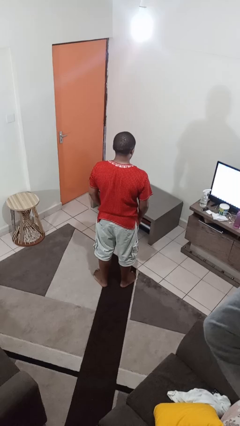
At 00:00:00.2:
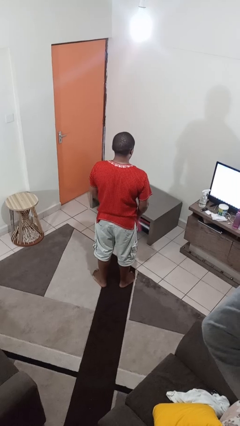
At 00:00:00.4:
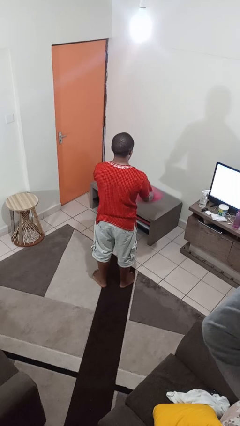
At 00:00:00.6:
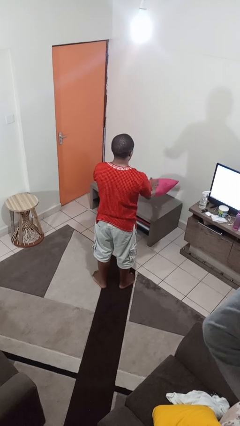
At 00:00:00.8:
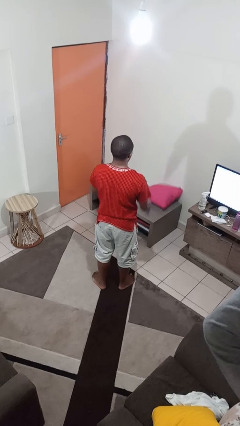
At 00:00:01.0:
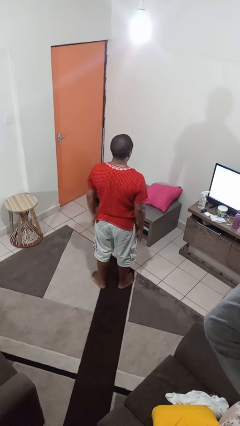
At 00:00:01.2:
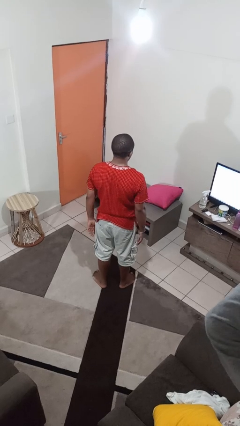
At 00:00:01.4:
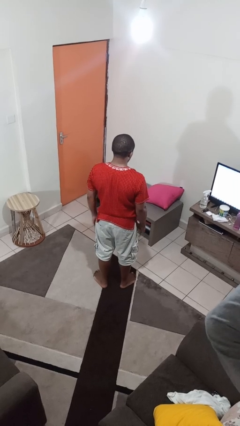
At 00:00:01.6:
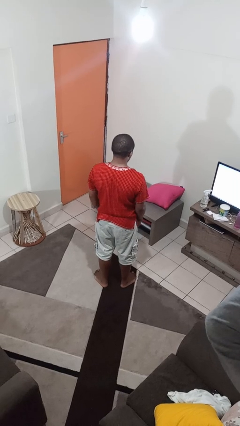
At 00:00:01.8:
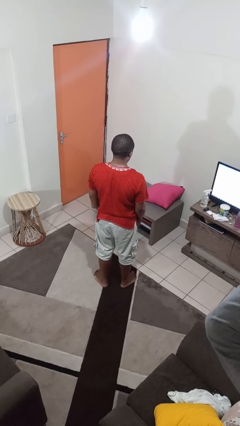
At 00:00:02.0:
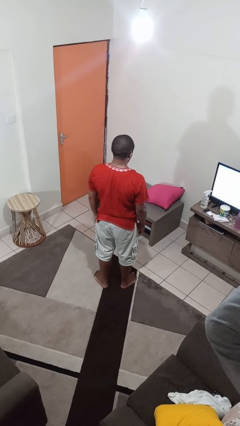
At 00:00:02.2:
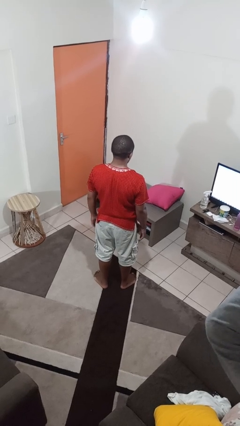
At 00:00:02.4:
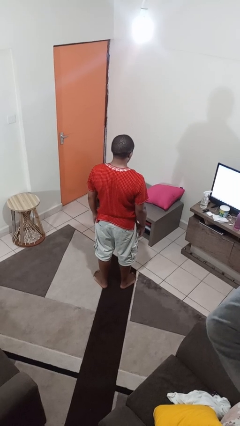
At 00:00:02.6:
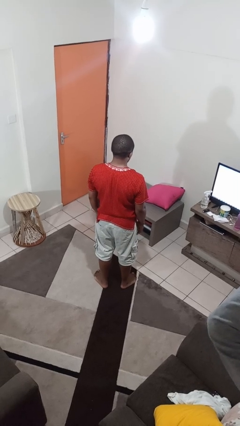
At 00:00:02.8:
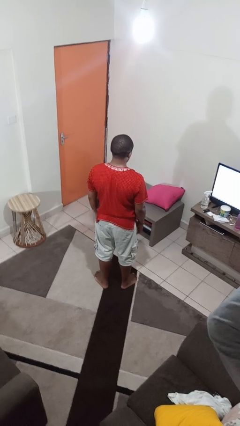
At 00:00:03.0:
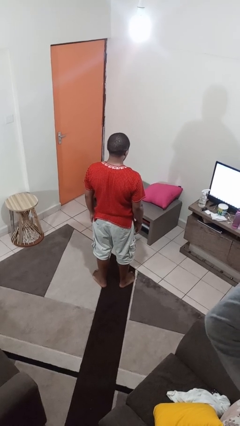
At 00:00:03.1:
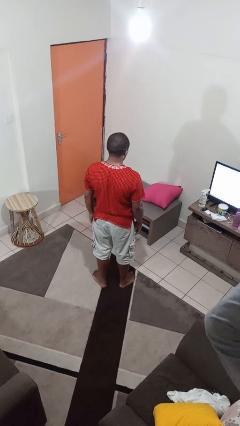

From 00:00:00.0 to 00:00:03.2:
person throws object on table

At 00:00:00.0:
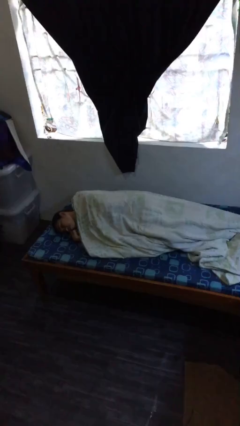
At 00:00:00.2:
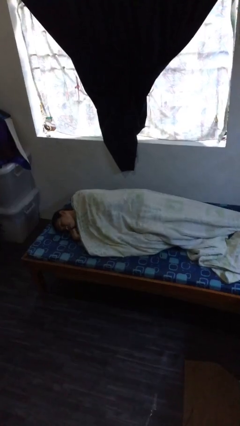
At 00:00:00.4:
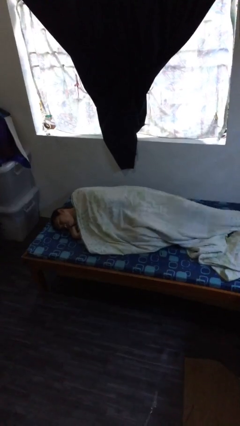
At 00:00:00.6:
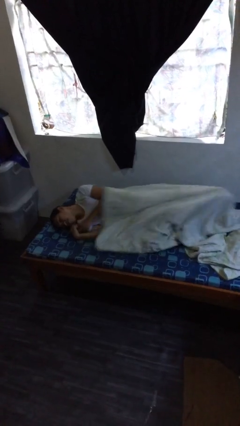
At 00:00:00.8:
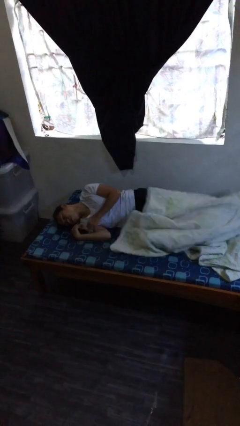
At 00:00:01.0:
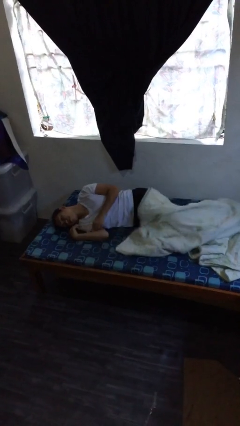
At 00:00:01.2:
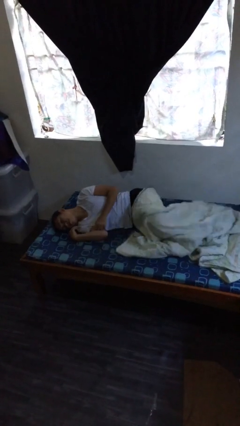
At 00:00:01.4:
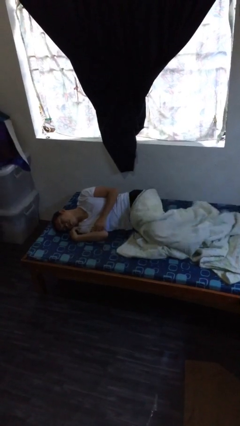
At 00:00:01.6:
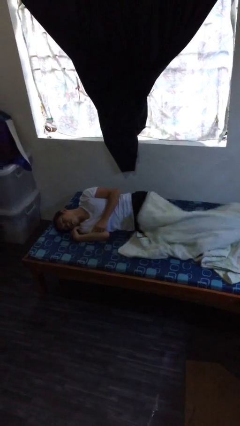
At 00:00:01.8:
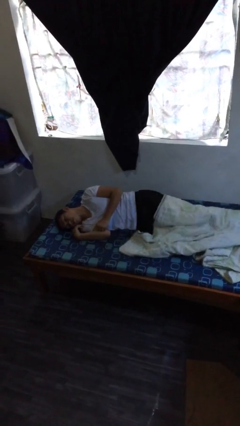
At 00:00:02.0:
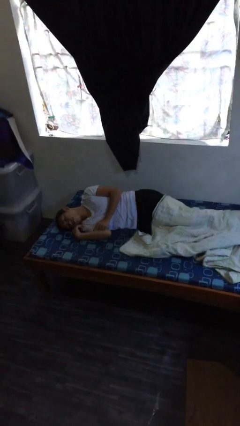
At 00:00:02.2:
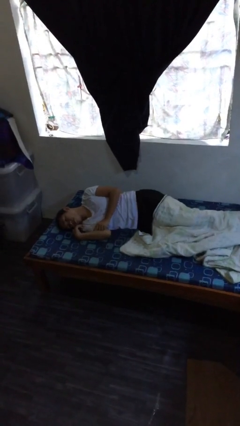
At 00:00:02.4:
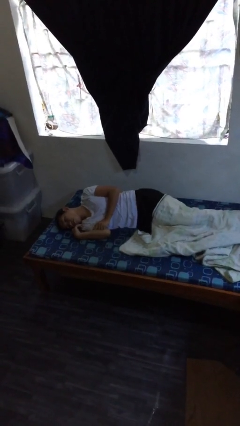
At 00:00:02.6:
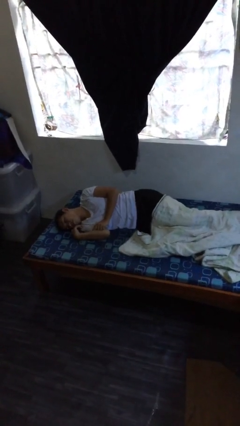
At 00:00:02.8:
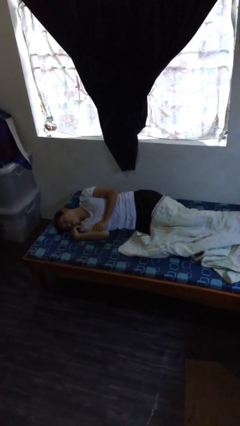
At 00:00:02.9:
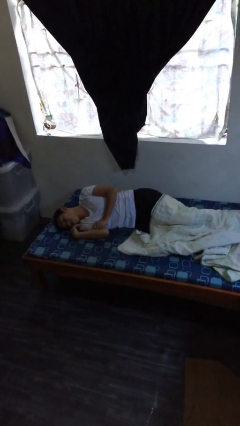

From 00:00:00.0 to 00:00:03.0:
person uncovers with bedsheets

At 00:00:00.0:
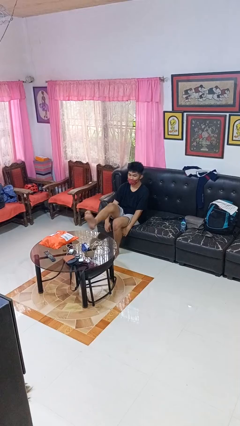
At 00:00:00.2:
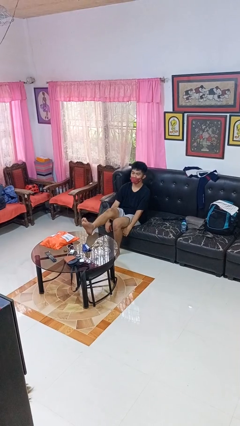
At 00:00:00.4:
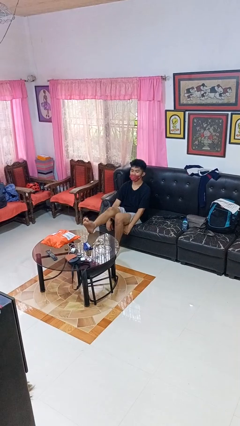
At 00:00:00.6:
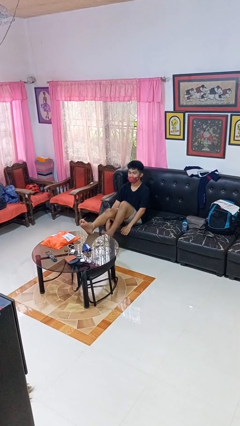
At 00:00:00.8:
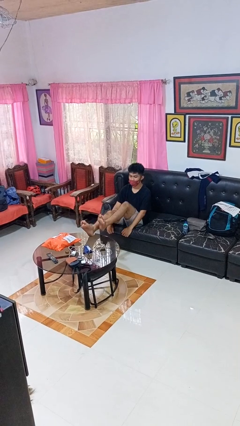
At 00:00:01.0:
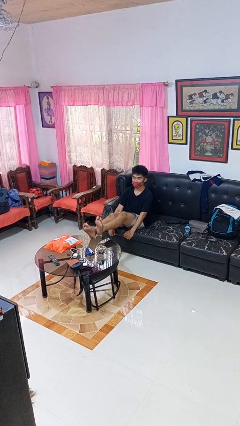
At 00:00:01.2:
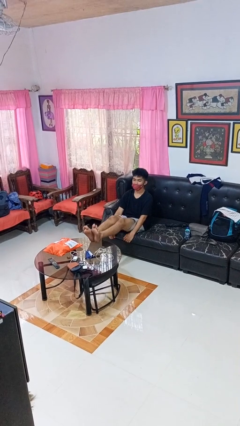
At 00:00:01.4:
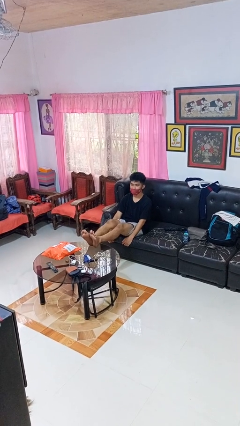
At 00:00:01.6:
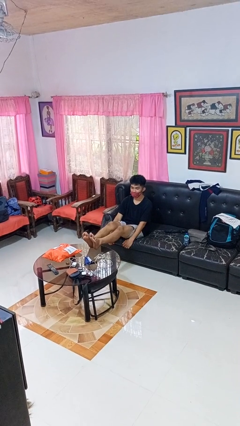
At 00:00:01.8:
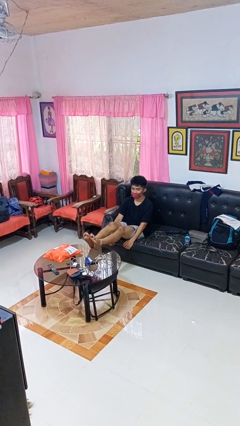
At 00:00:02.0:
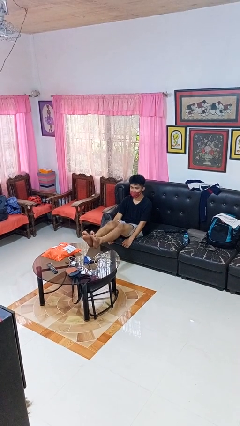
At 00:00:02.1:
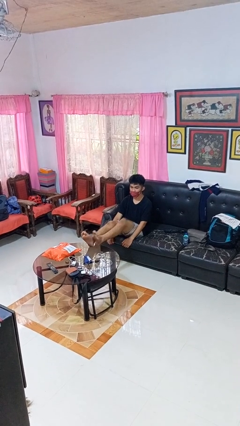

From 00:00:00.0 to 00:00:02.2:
person puts feet up

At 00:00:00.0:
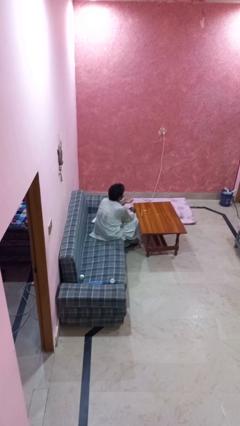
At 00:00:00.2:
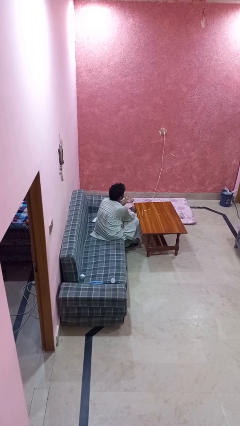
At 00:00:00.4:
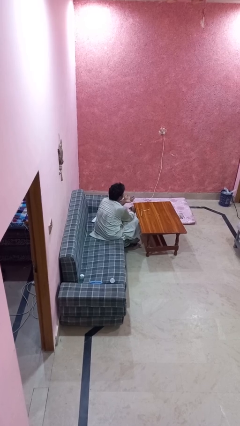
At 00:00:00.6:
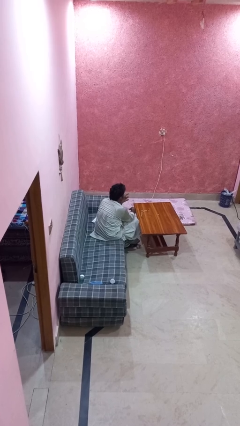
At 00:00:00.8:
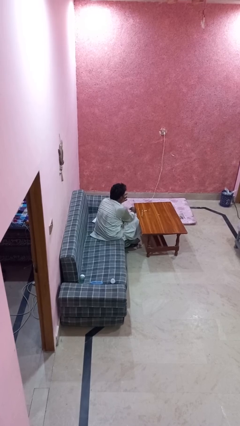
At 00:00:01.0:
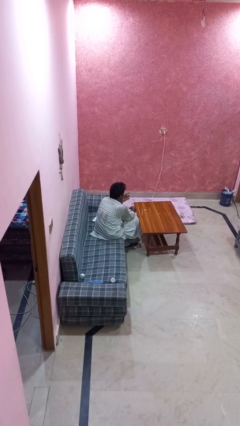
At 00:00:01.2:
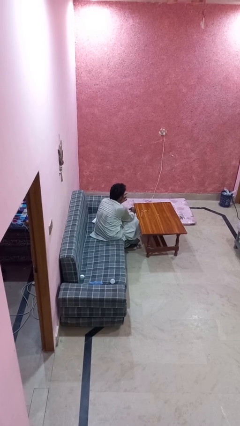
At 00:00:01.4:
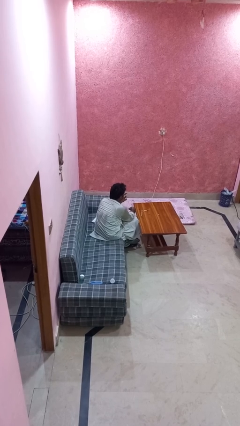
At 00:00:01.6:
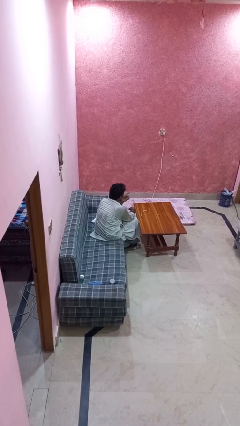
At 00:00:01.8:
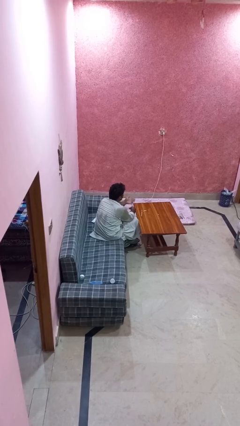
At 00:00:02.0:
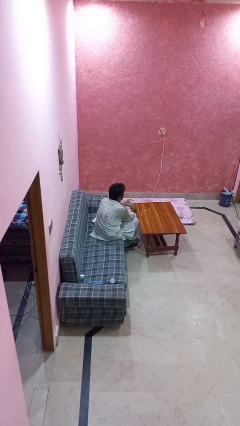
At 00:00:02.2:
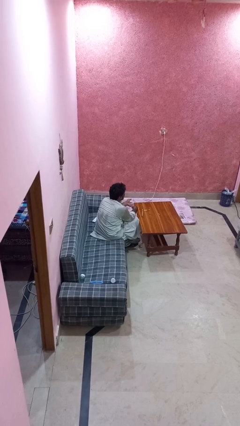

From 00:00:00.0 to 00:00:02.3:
person licks fingers

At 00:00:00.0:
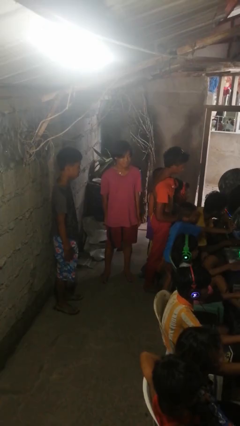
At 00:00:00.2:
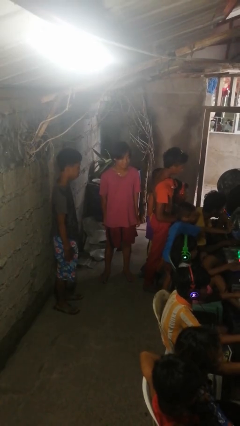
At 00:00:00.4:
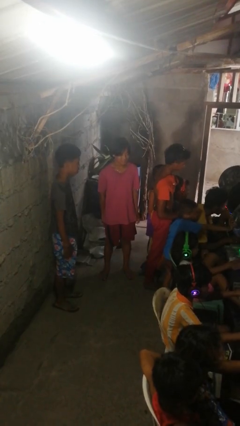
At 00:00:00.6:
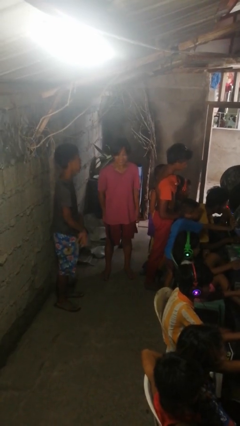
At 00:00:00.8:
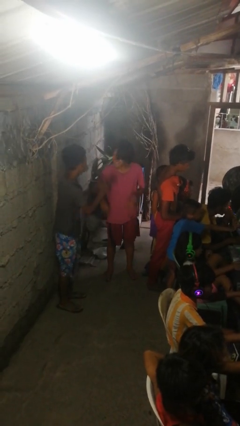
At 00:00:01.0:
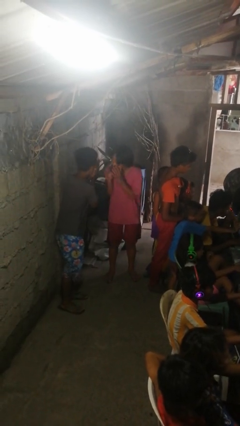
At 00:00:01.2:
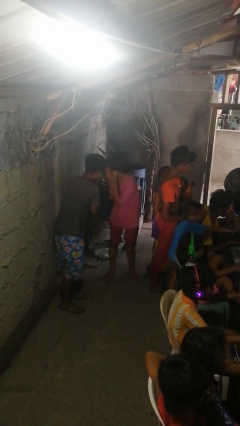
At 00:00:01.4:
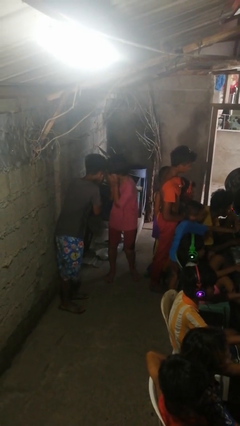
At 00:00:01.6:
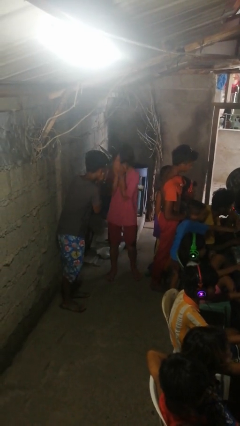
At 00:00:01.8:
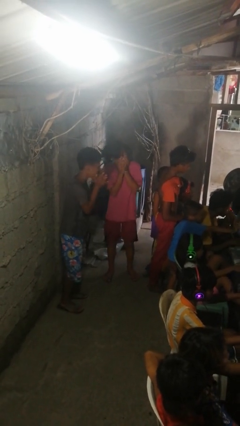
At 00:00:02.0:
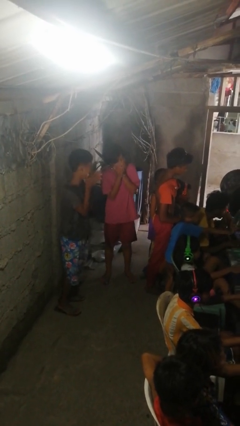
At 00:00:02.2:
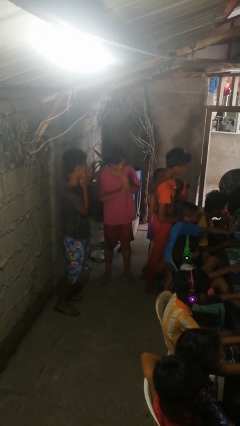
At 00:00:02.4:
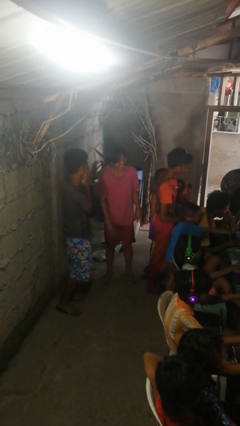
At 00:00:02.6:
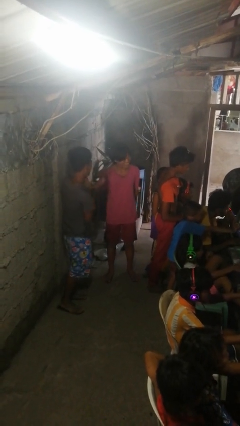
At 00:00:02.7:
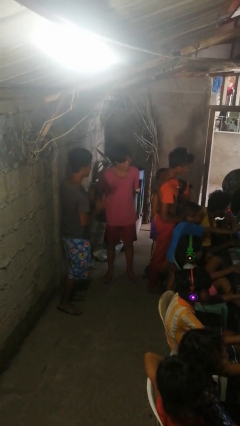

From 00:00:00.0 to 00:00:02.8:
person laughs with person

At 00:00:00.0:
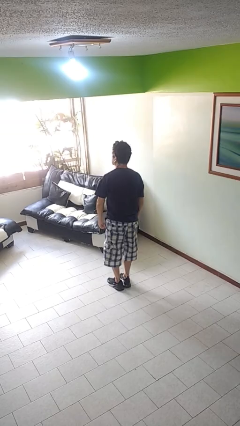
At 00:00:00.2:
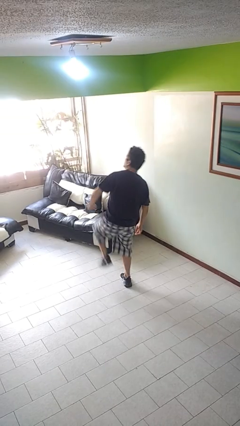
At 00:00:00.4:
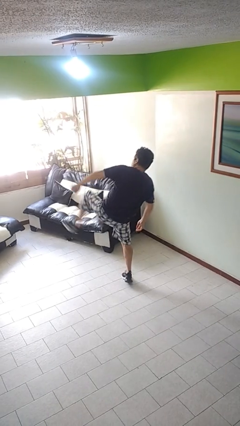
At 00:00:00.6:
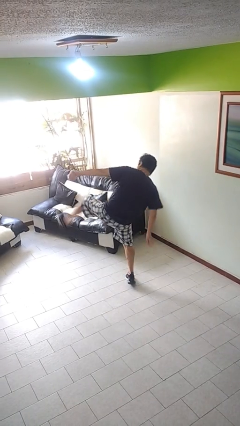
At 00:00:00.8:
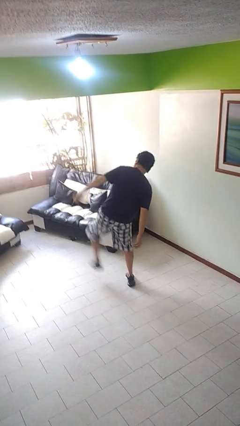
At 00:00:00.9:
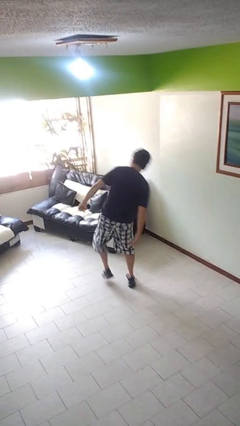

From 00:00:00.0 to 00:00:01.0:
person karate kicks

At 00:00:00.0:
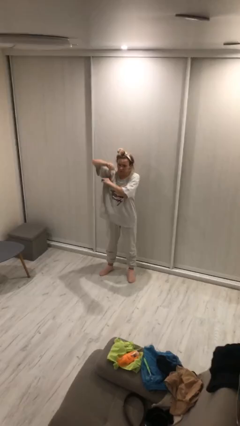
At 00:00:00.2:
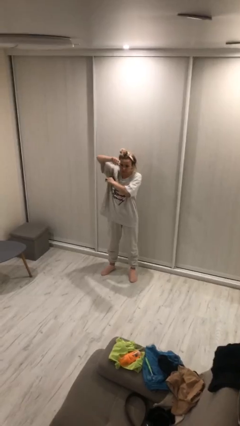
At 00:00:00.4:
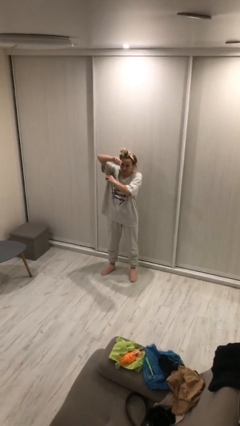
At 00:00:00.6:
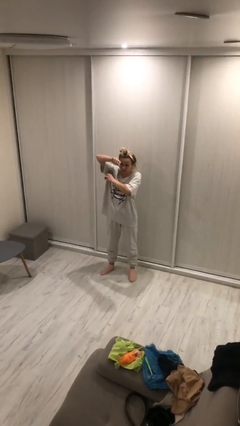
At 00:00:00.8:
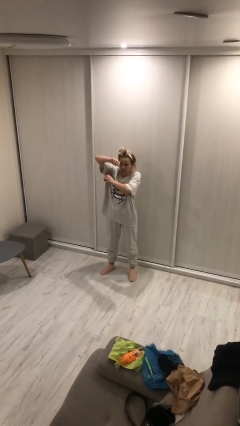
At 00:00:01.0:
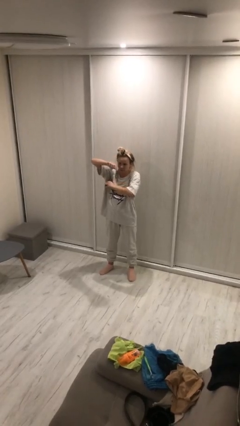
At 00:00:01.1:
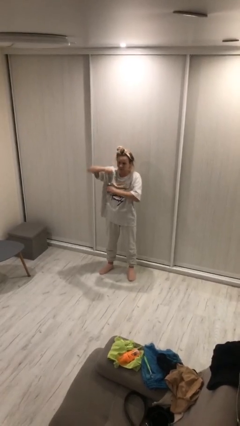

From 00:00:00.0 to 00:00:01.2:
person applies deodorant

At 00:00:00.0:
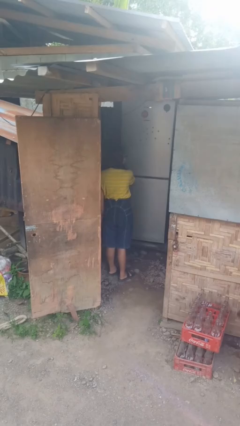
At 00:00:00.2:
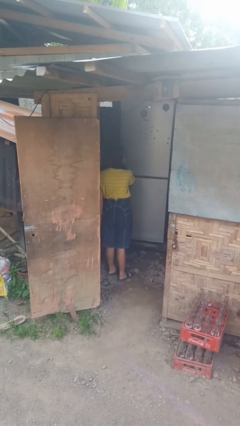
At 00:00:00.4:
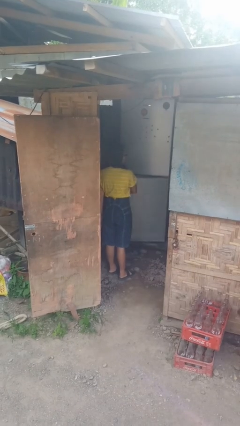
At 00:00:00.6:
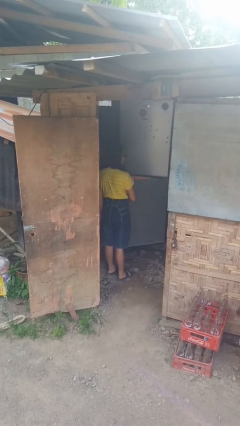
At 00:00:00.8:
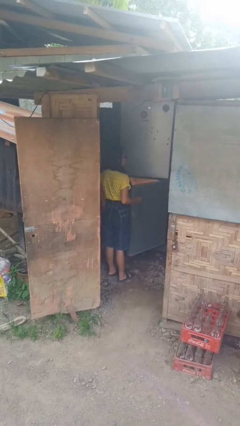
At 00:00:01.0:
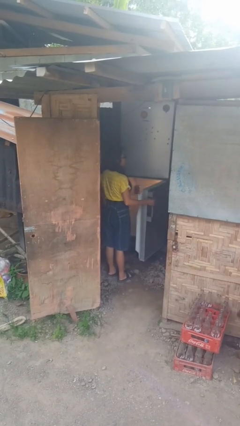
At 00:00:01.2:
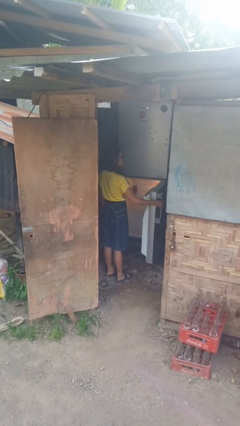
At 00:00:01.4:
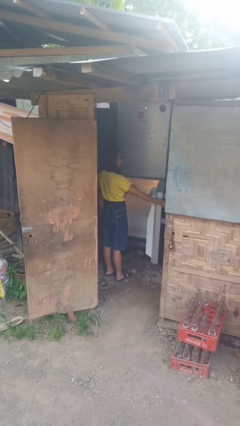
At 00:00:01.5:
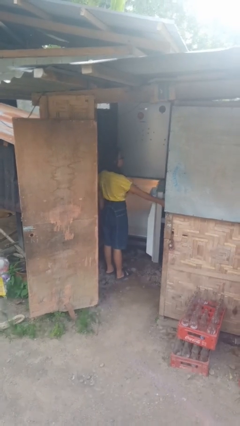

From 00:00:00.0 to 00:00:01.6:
person opens refrigerator
